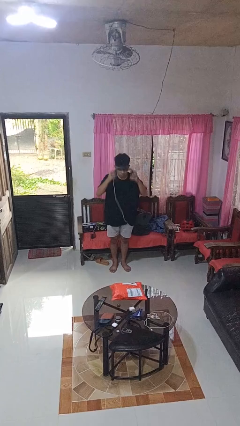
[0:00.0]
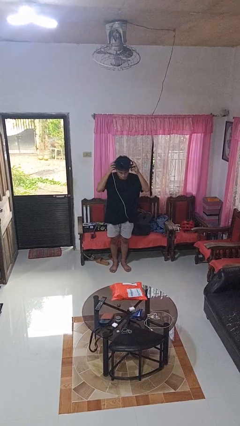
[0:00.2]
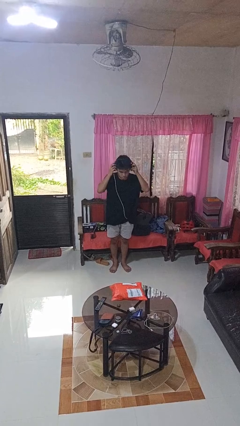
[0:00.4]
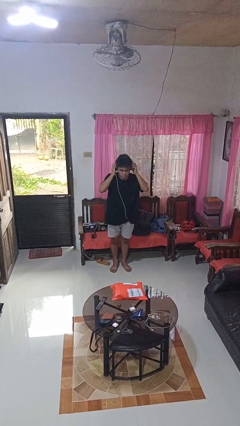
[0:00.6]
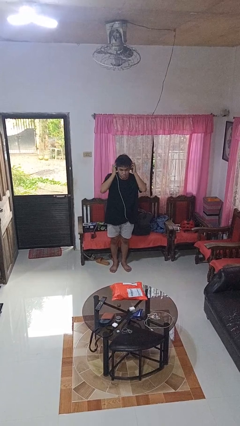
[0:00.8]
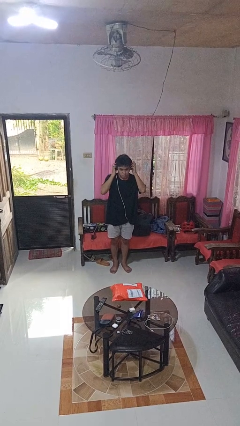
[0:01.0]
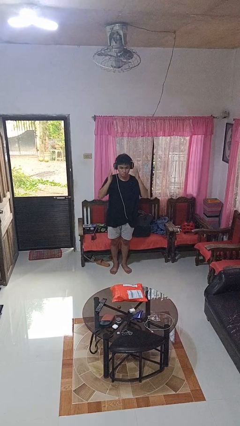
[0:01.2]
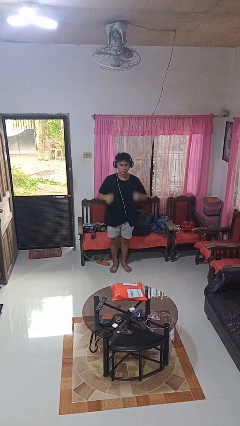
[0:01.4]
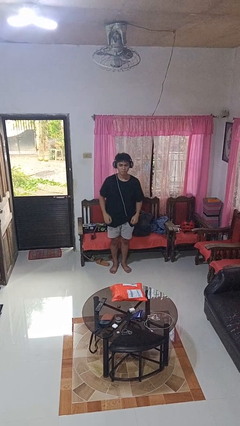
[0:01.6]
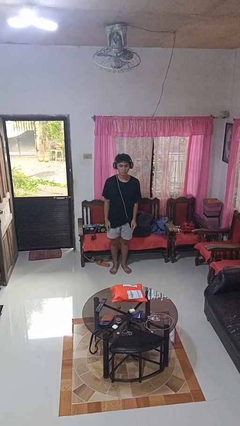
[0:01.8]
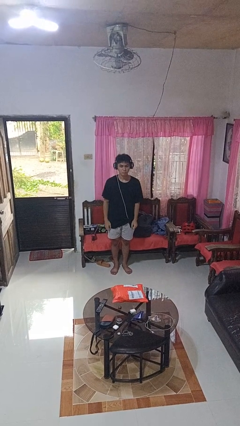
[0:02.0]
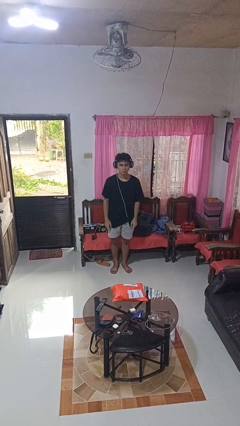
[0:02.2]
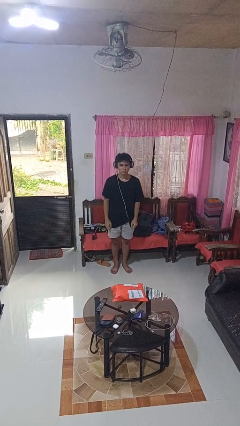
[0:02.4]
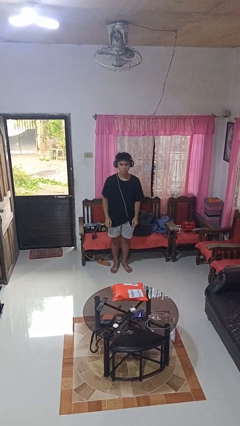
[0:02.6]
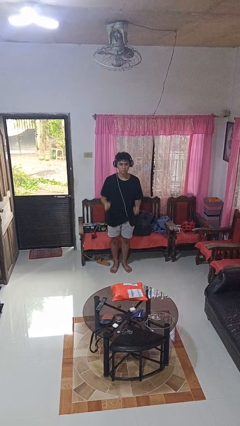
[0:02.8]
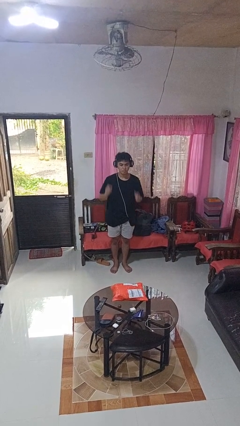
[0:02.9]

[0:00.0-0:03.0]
person puts on headphones

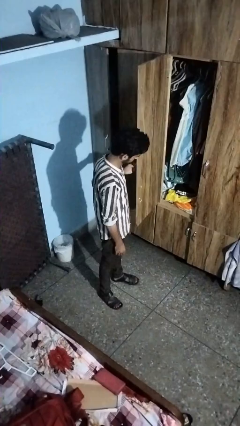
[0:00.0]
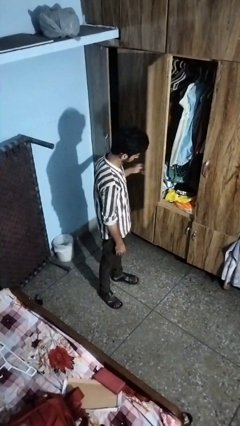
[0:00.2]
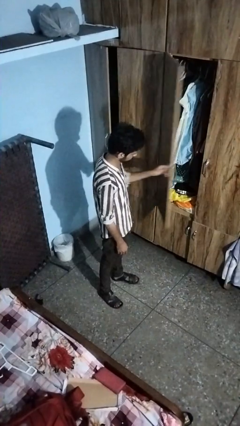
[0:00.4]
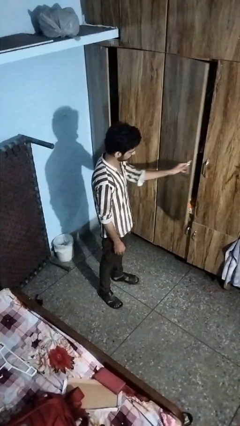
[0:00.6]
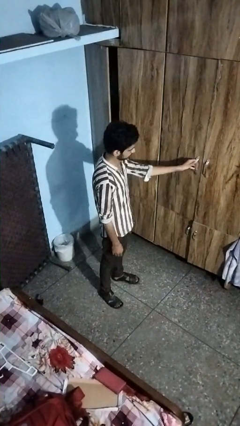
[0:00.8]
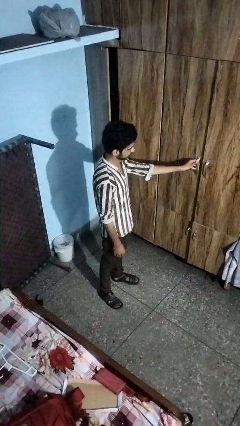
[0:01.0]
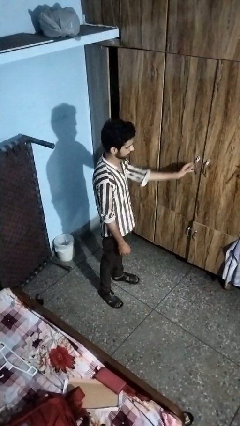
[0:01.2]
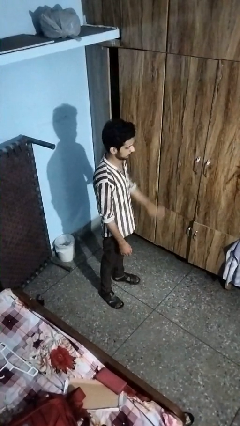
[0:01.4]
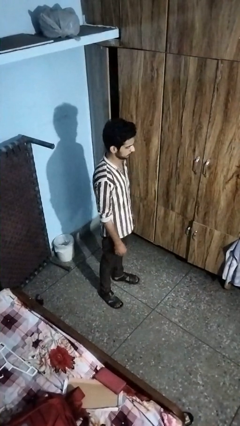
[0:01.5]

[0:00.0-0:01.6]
person closes closet door

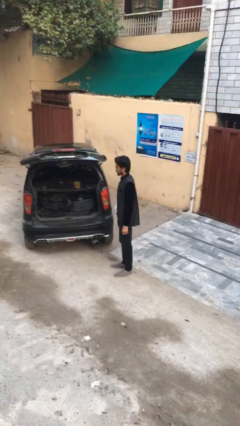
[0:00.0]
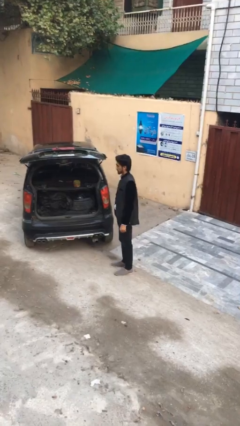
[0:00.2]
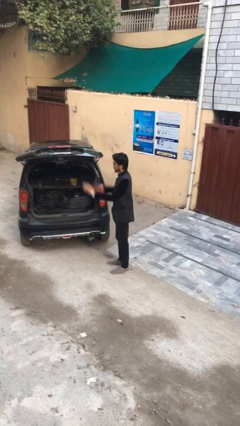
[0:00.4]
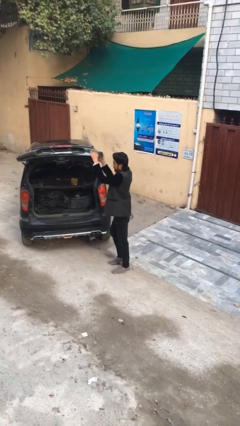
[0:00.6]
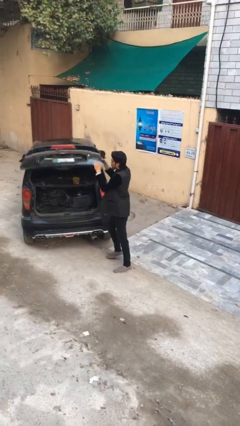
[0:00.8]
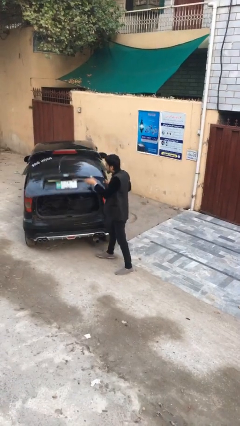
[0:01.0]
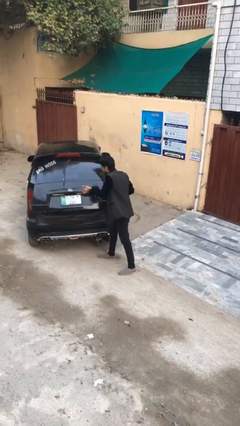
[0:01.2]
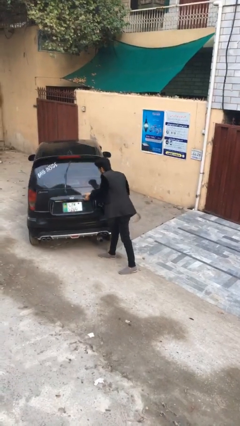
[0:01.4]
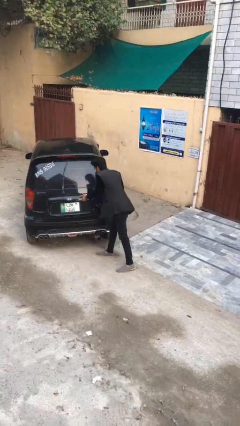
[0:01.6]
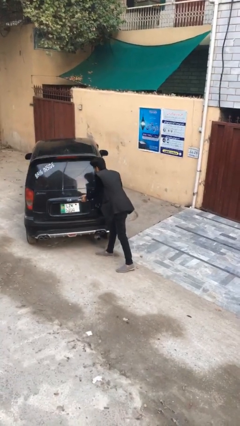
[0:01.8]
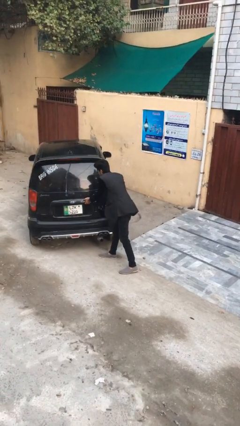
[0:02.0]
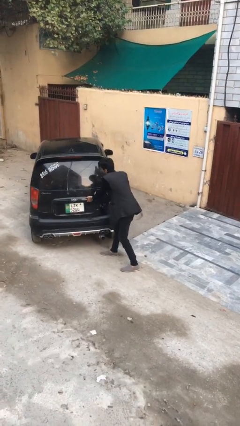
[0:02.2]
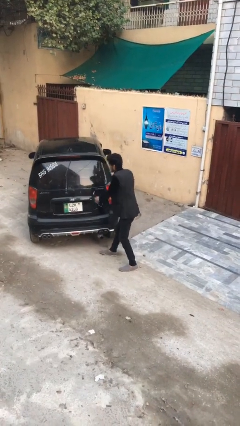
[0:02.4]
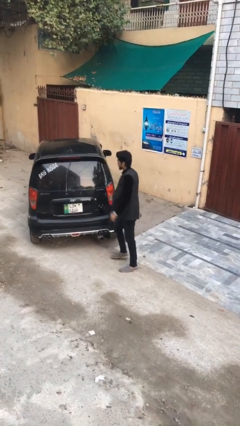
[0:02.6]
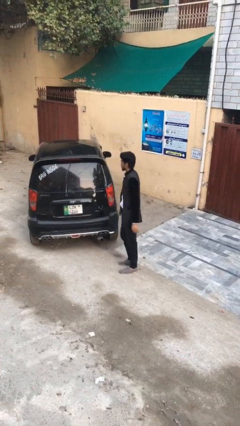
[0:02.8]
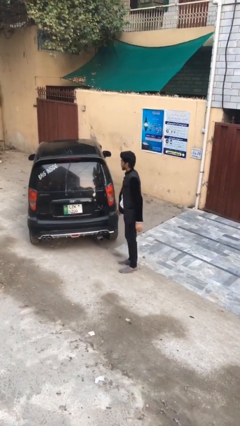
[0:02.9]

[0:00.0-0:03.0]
person closes car trunk

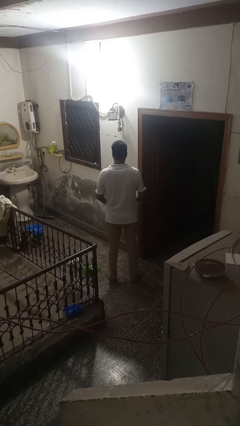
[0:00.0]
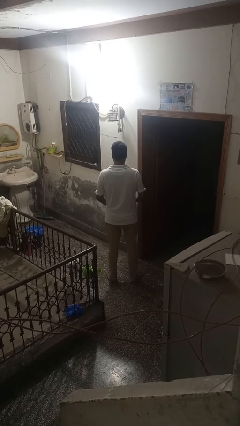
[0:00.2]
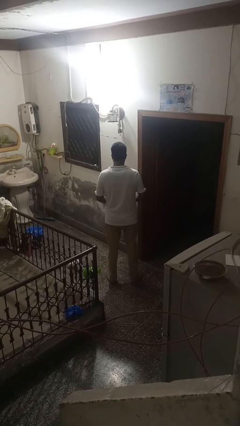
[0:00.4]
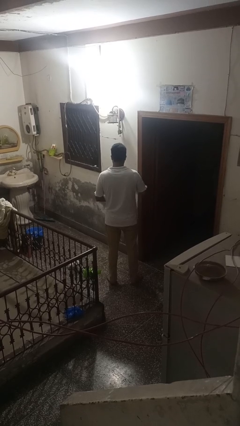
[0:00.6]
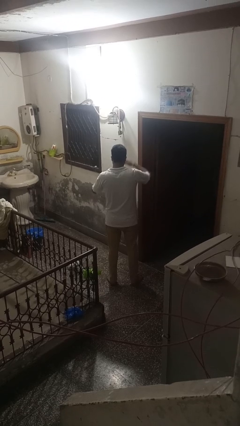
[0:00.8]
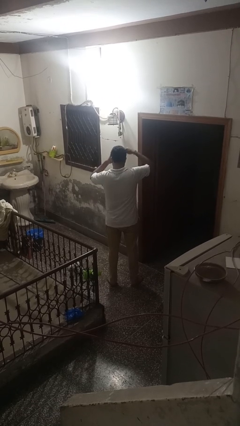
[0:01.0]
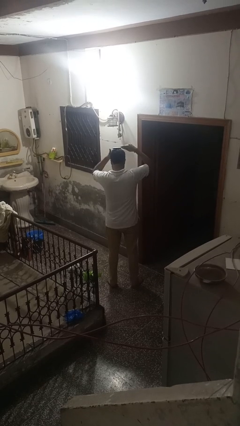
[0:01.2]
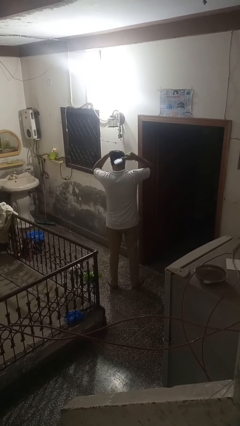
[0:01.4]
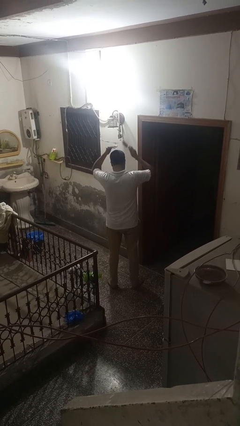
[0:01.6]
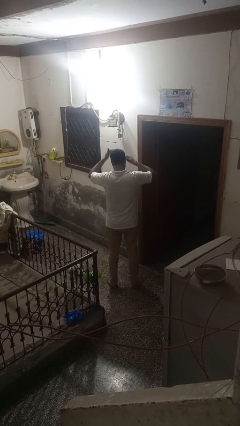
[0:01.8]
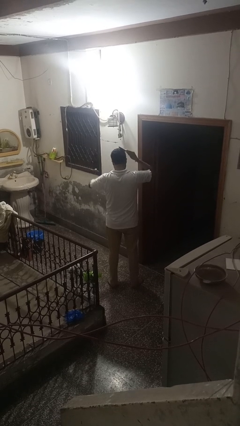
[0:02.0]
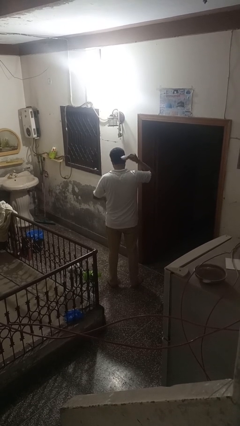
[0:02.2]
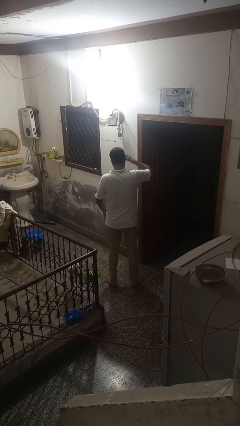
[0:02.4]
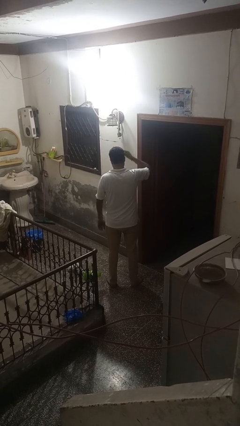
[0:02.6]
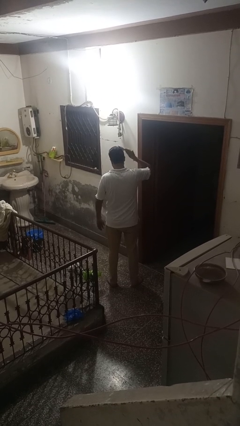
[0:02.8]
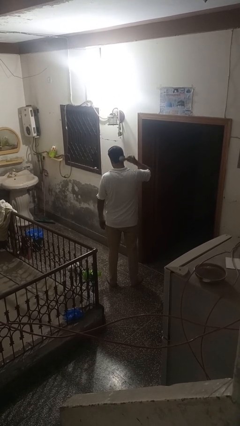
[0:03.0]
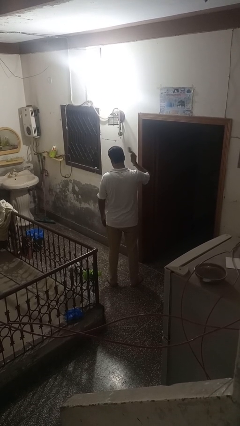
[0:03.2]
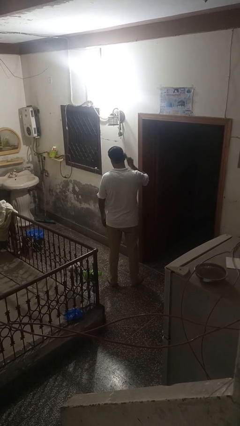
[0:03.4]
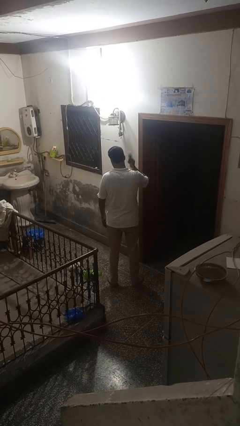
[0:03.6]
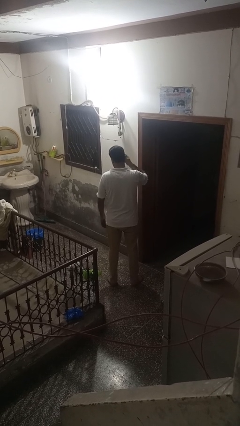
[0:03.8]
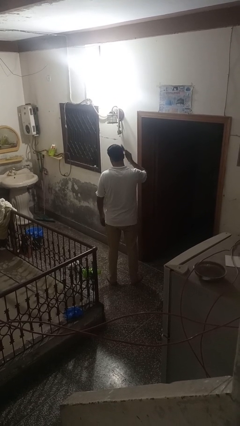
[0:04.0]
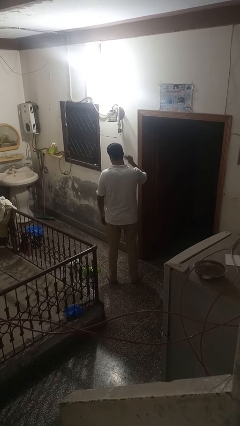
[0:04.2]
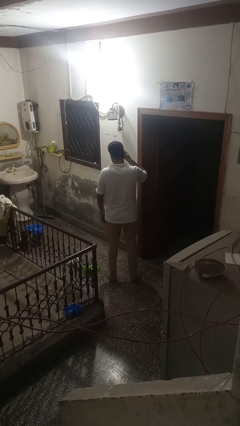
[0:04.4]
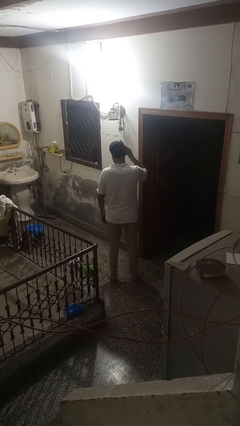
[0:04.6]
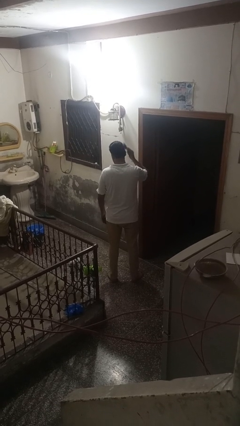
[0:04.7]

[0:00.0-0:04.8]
person brushes hair

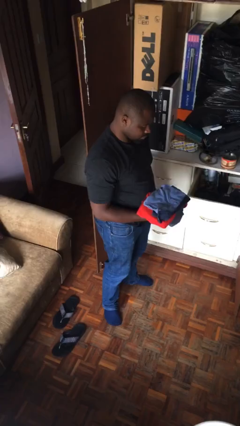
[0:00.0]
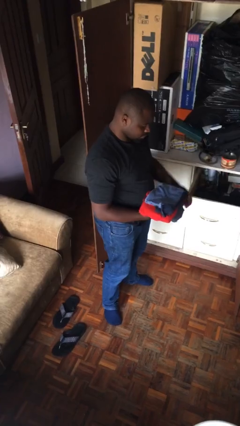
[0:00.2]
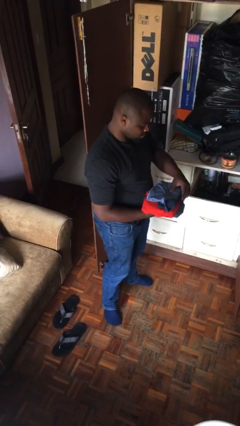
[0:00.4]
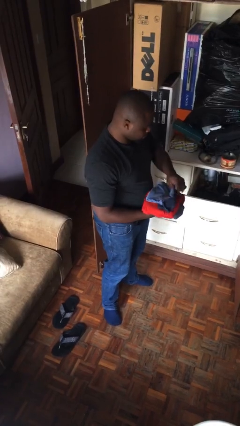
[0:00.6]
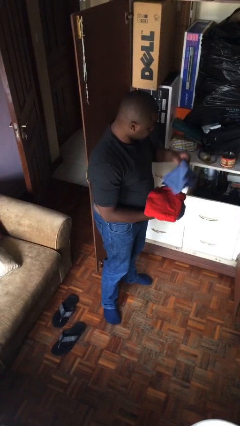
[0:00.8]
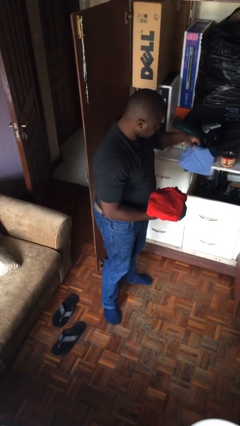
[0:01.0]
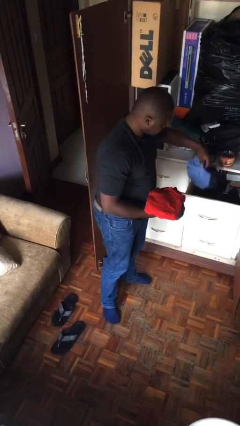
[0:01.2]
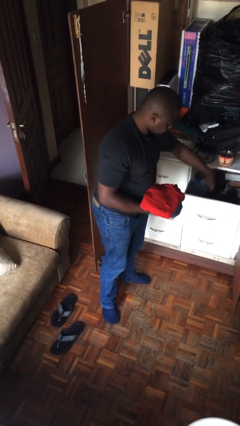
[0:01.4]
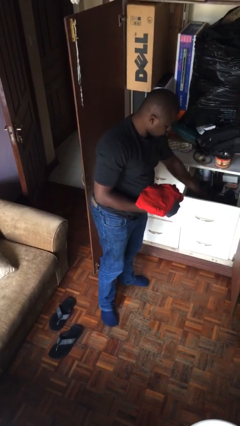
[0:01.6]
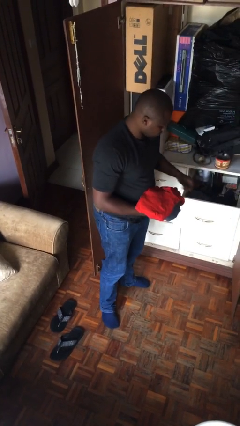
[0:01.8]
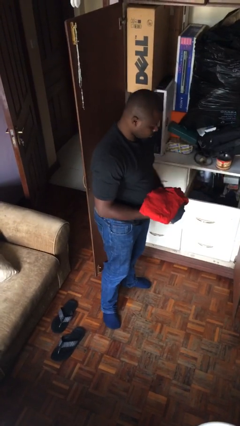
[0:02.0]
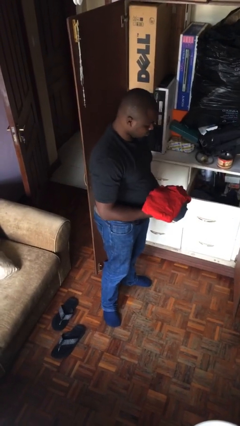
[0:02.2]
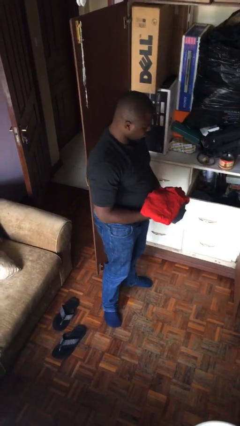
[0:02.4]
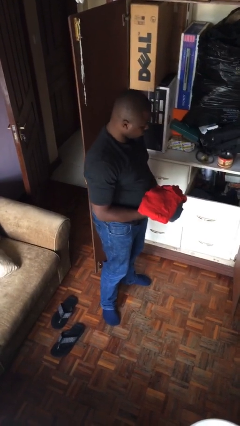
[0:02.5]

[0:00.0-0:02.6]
person puts clothes into dresser

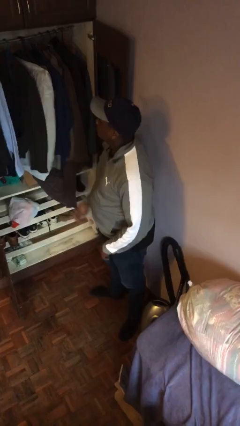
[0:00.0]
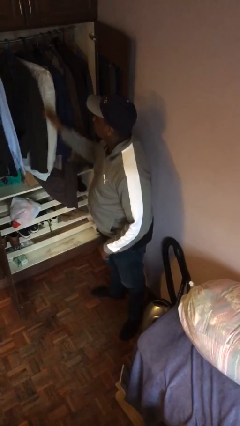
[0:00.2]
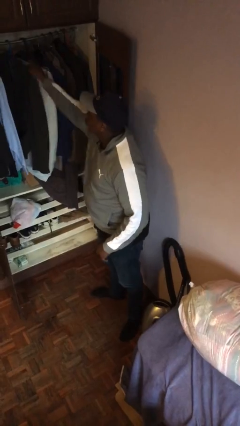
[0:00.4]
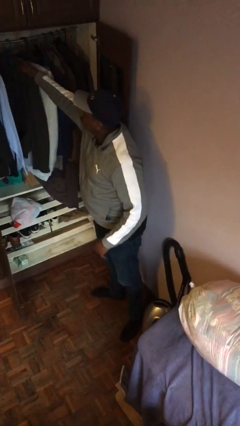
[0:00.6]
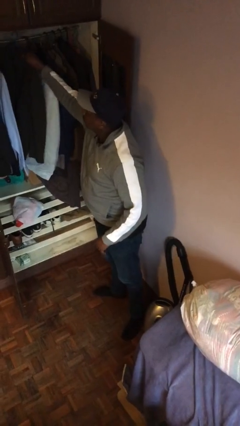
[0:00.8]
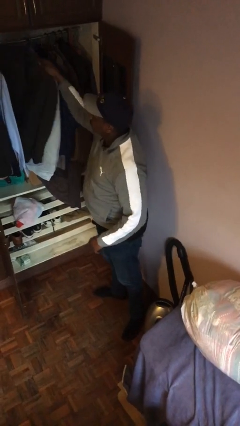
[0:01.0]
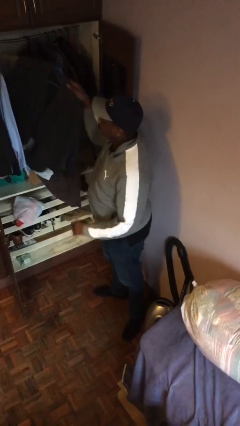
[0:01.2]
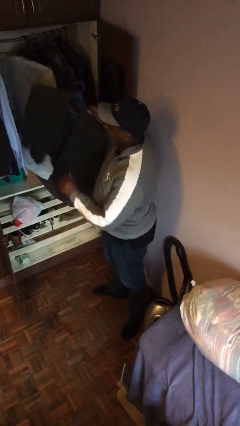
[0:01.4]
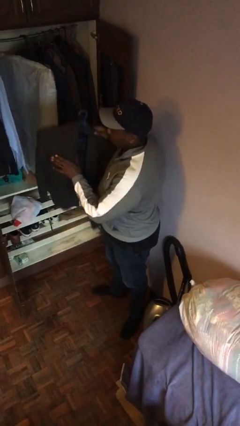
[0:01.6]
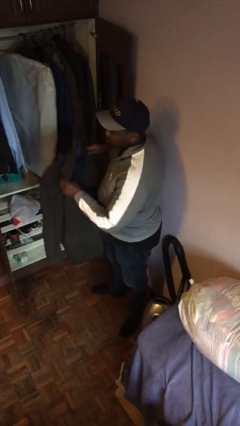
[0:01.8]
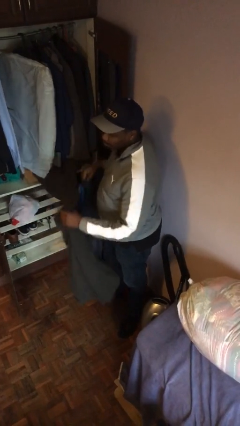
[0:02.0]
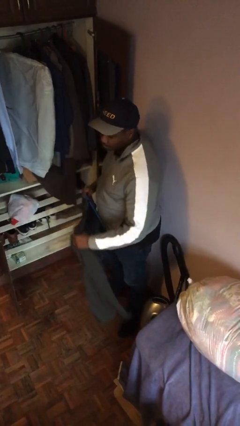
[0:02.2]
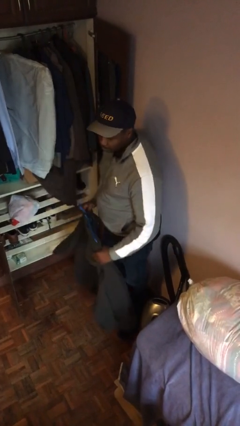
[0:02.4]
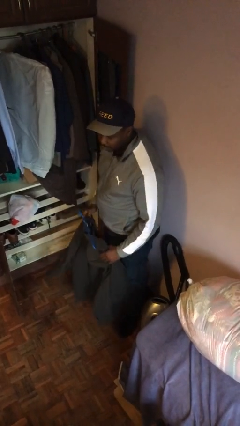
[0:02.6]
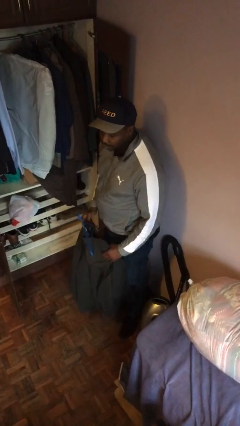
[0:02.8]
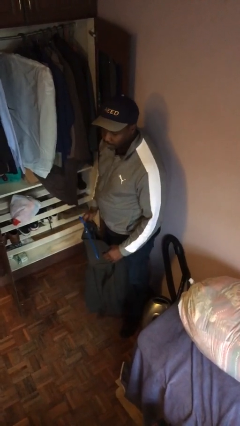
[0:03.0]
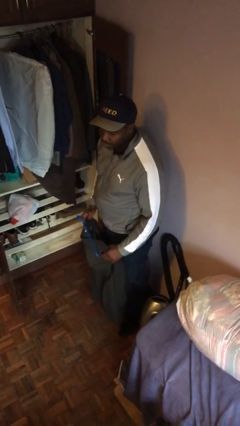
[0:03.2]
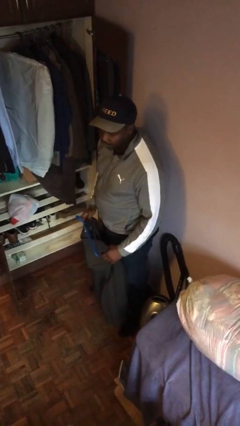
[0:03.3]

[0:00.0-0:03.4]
person takes clothes from closet
